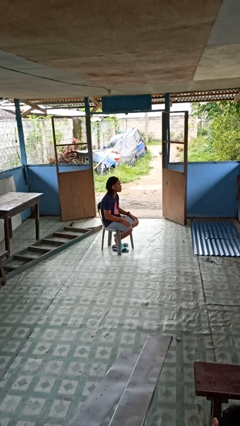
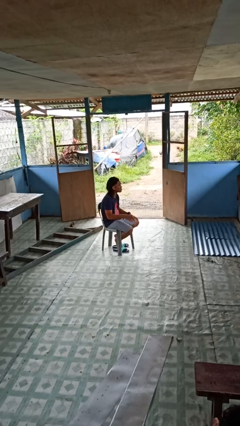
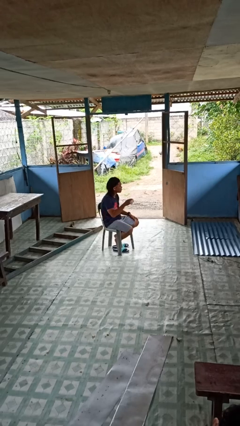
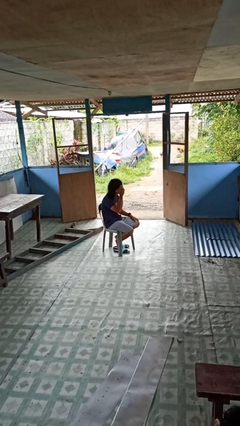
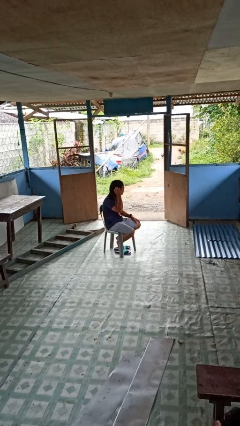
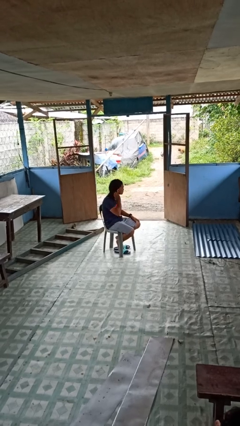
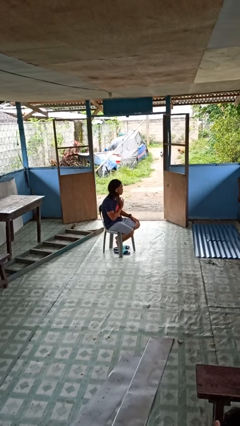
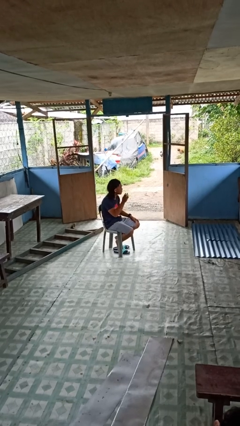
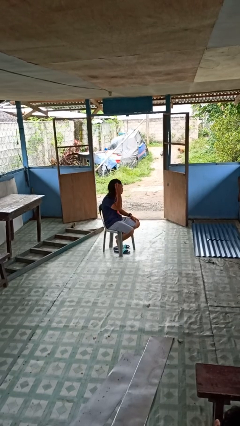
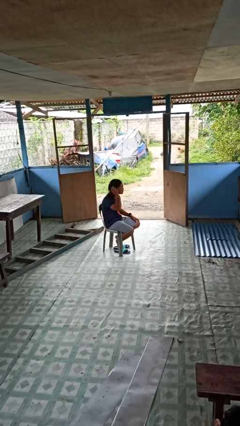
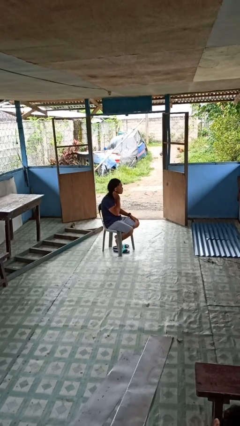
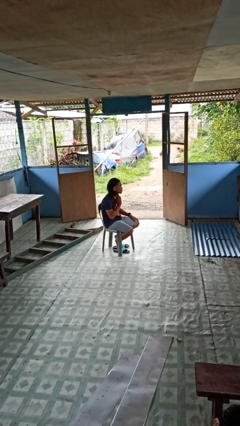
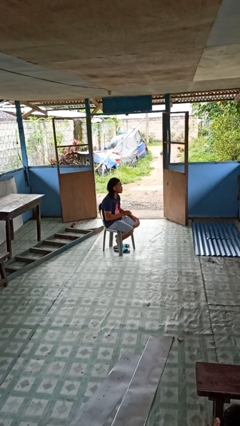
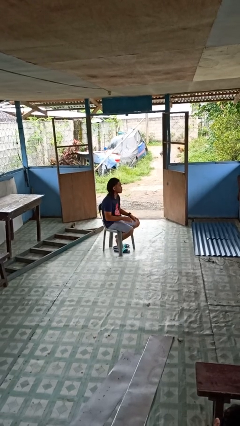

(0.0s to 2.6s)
person strokes hair

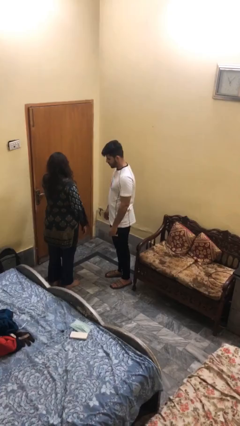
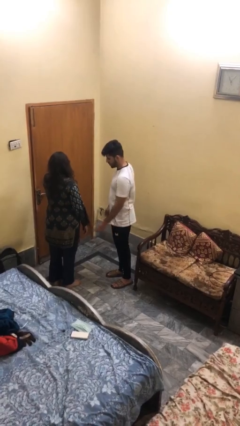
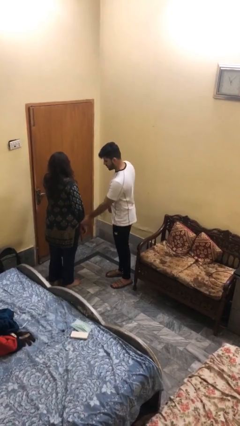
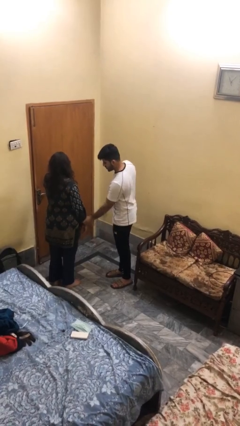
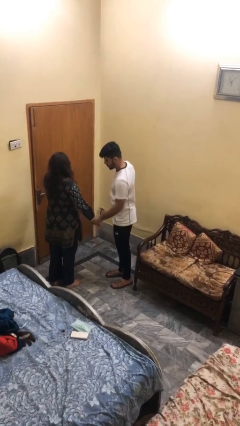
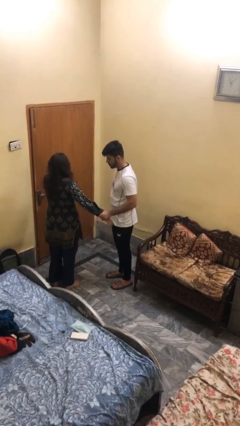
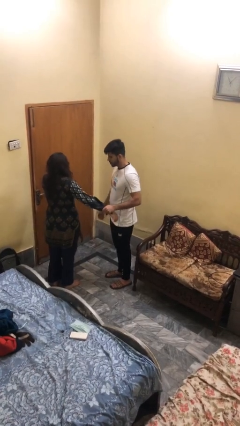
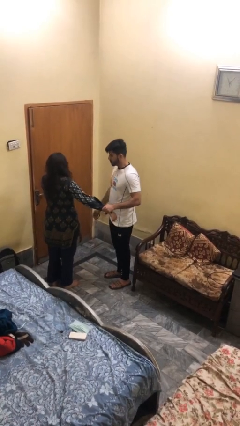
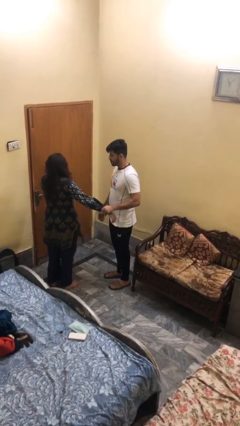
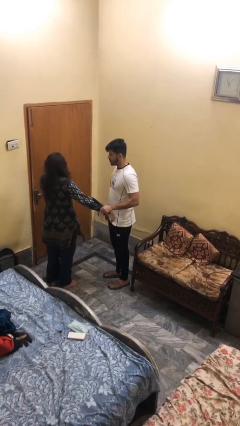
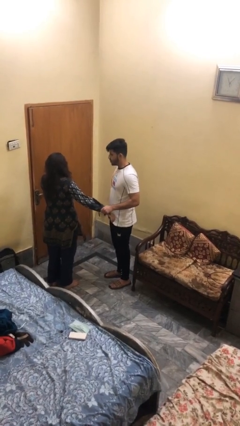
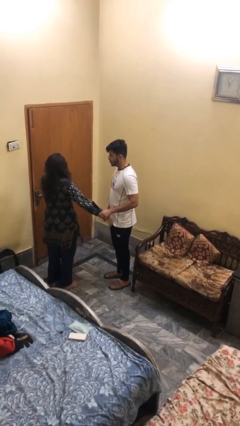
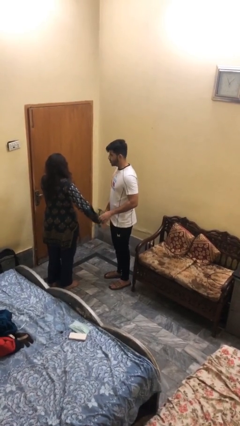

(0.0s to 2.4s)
person grabs person by forearm

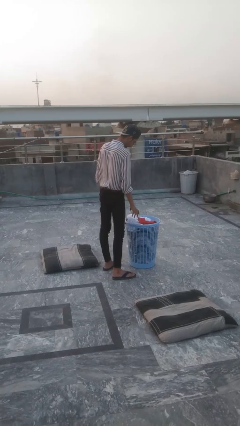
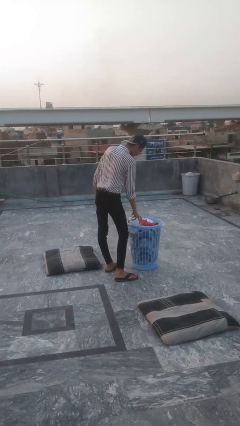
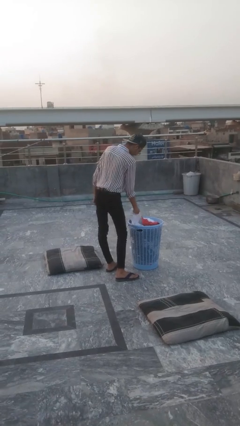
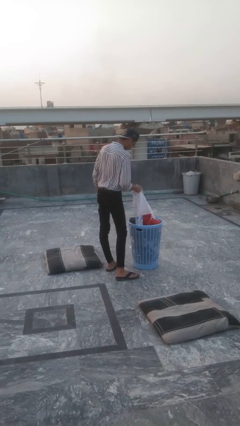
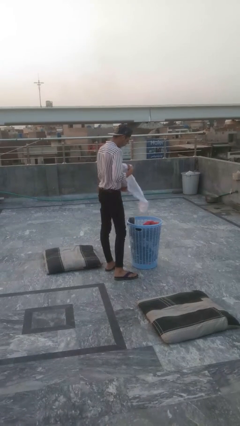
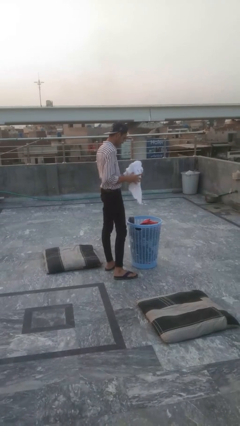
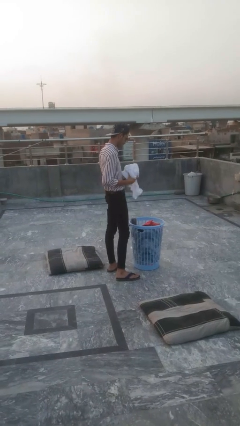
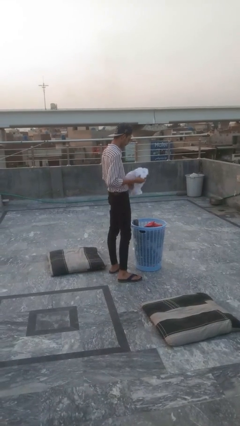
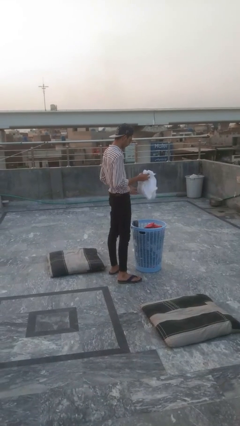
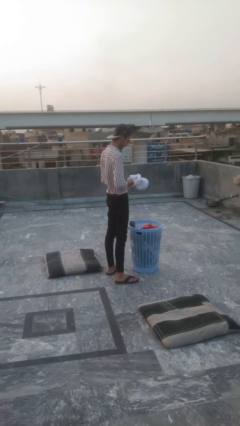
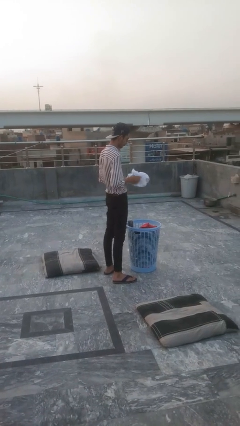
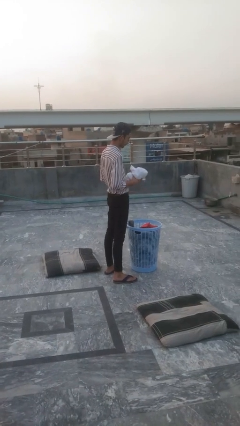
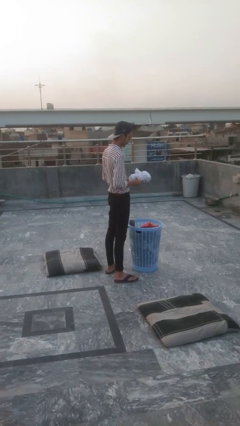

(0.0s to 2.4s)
person takes object from basket

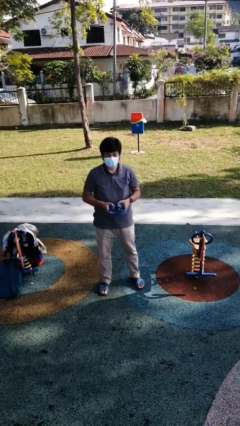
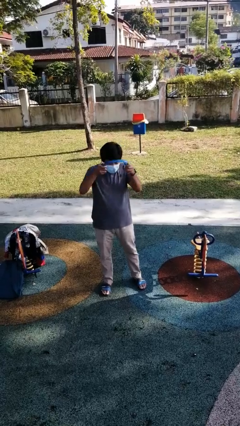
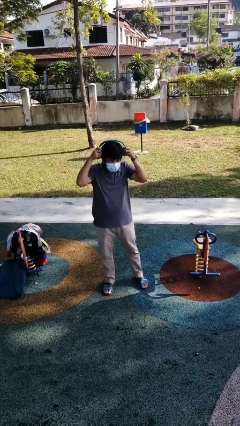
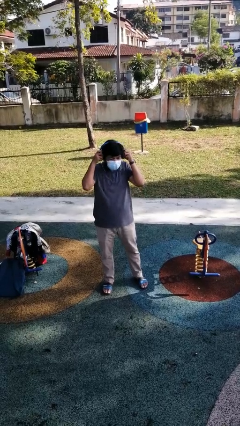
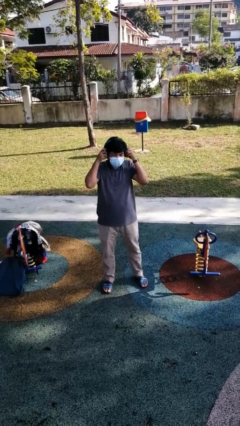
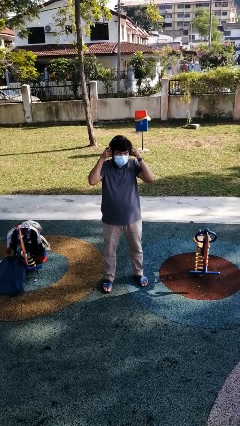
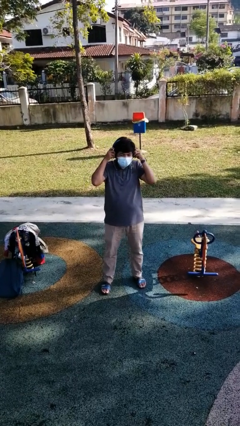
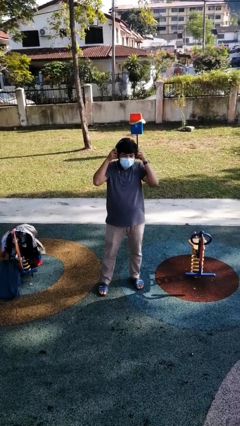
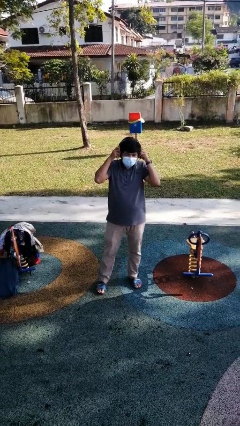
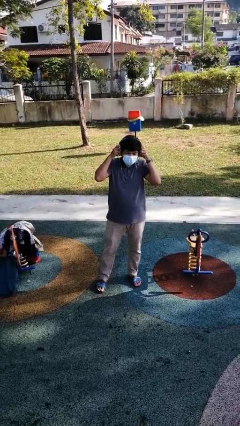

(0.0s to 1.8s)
person puts on headphones

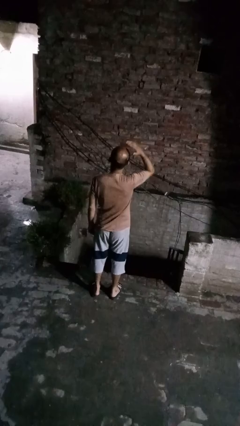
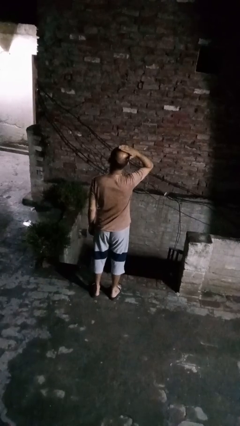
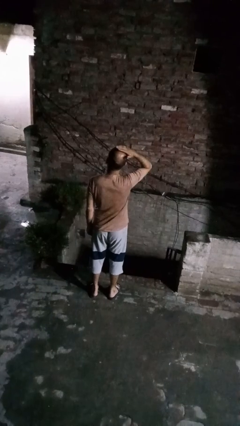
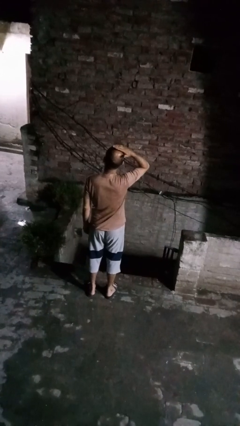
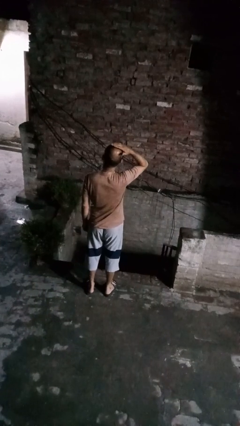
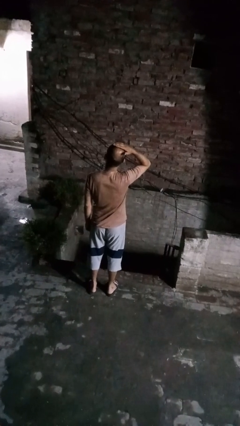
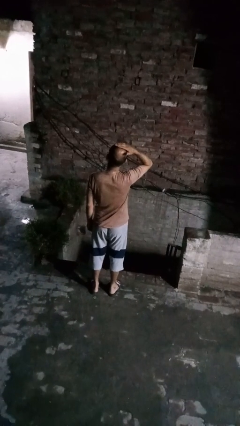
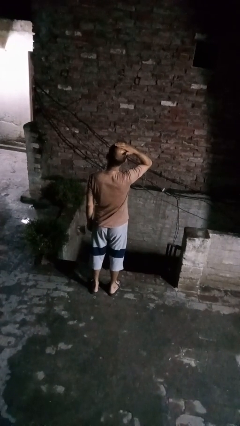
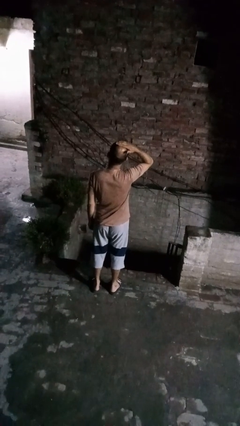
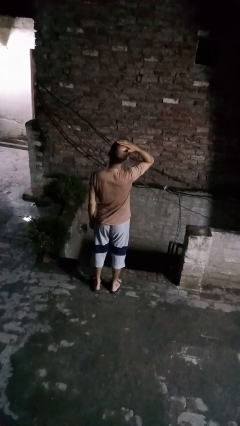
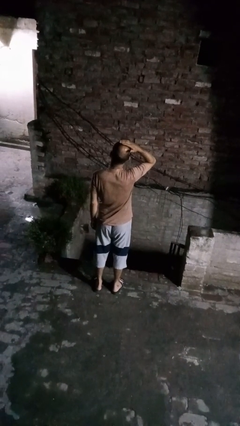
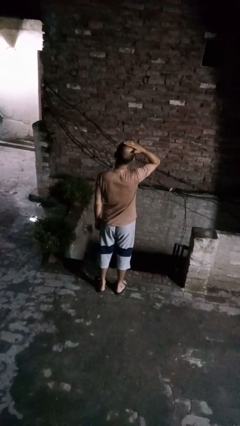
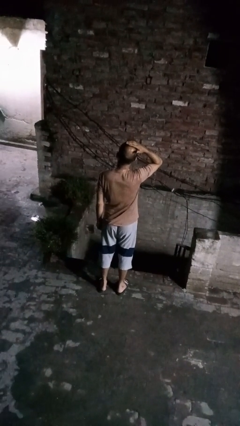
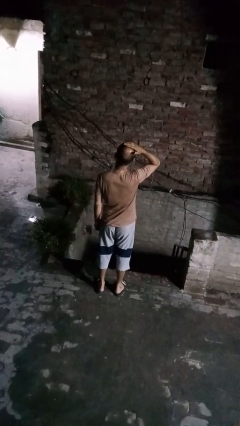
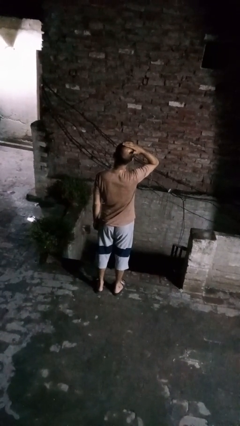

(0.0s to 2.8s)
person pats head

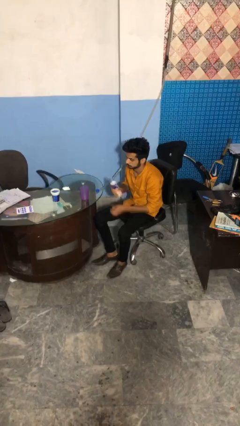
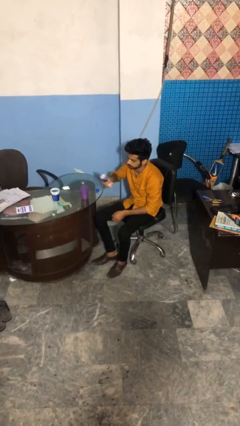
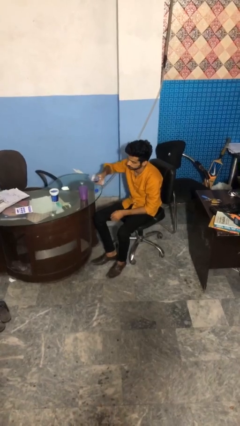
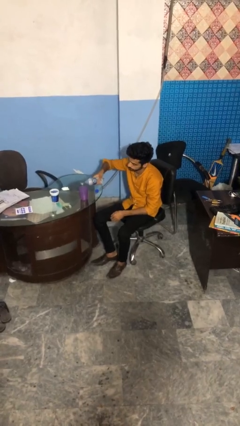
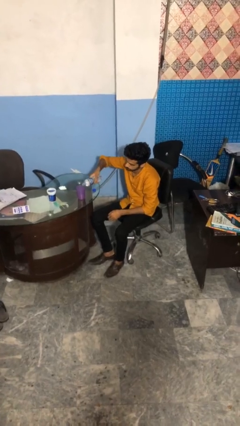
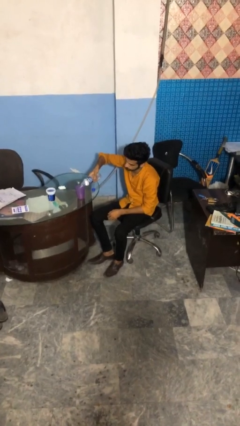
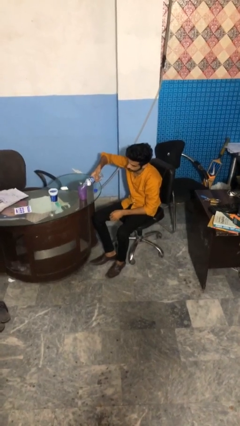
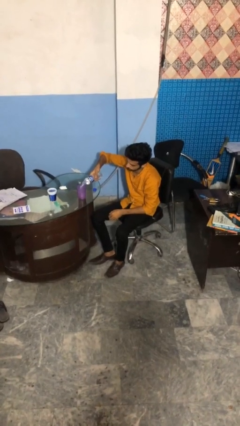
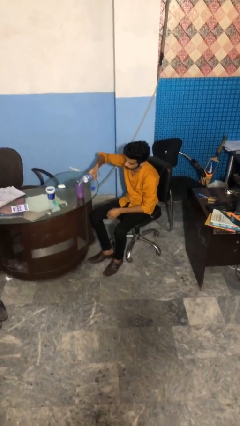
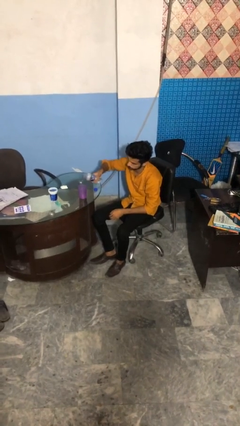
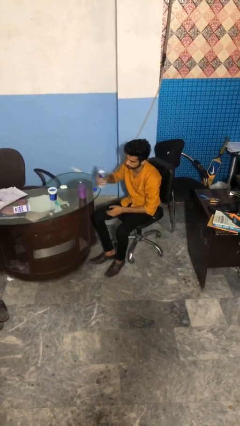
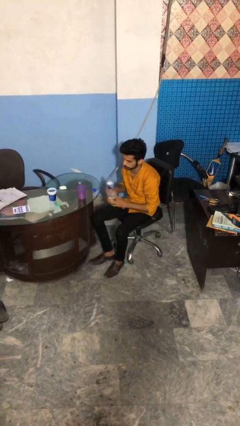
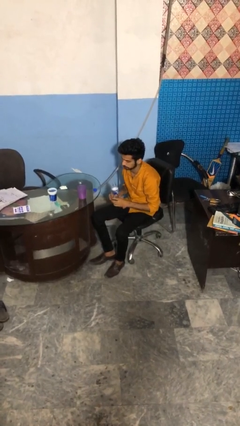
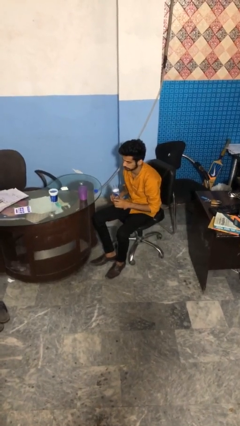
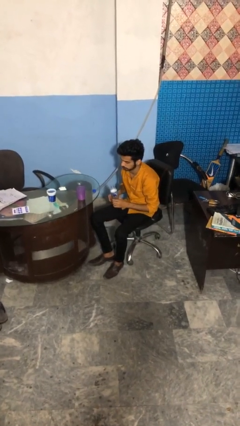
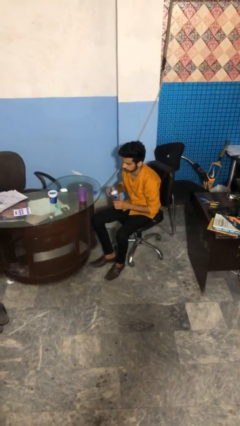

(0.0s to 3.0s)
person pours liquid into cup

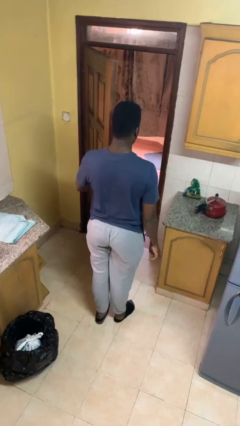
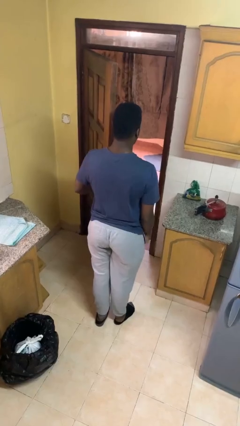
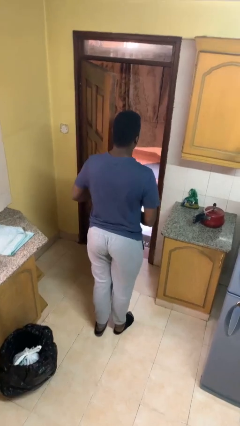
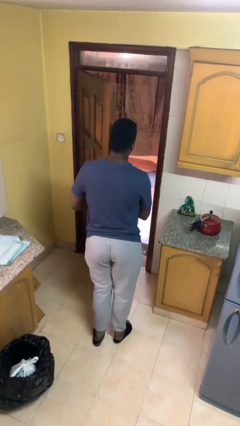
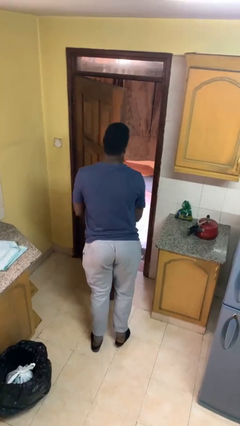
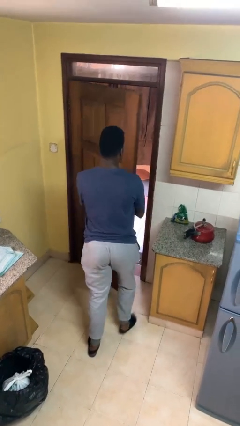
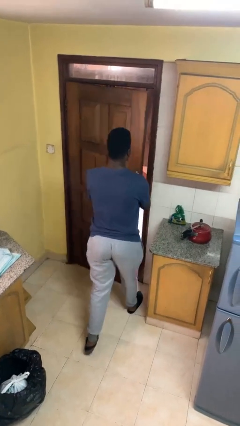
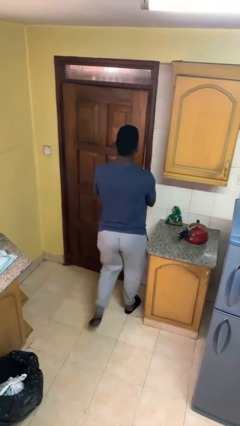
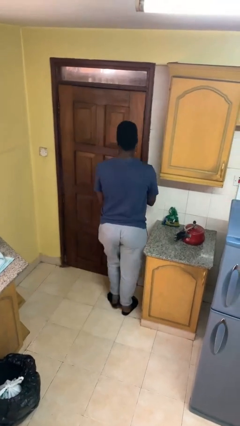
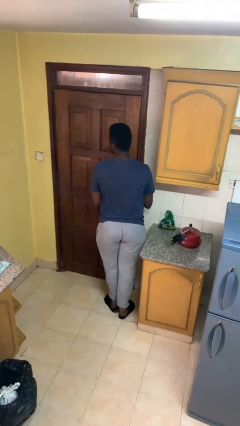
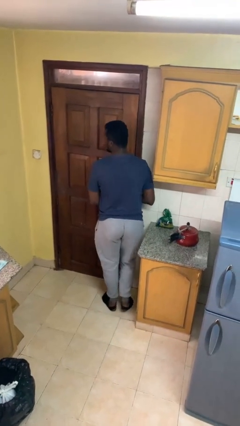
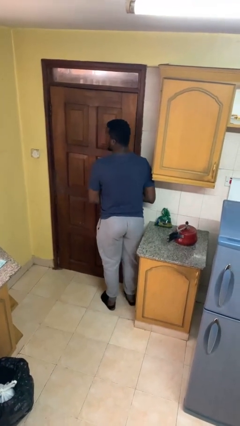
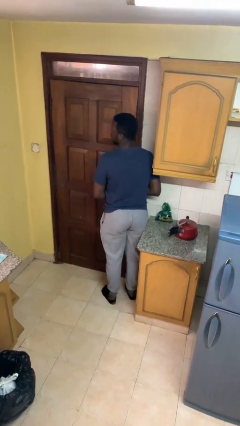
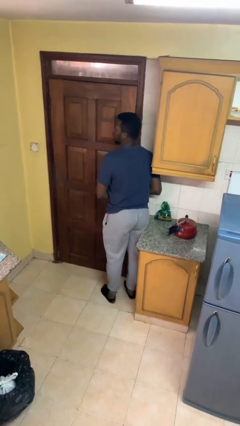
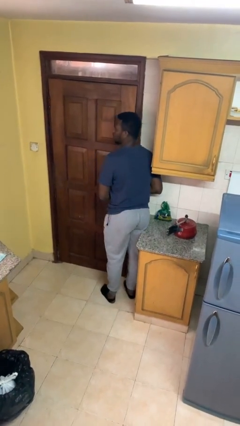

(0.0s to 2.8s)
person closes facility door
